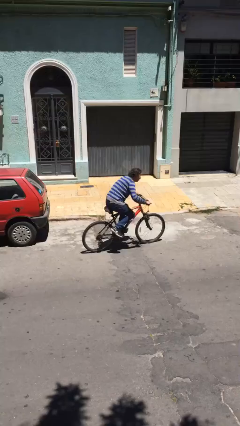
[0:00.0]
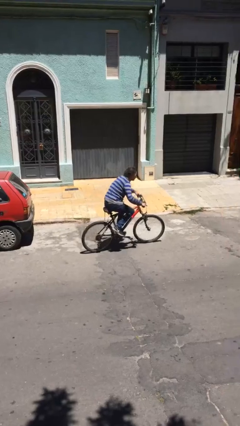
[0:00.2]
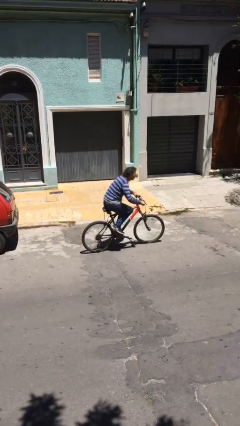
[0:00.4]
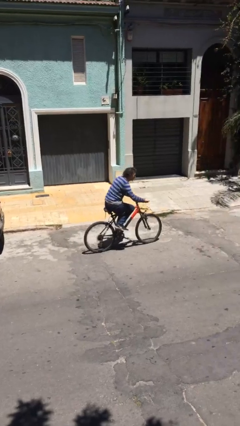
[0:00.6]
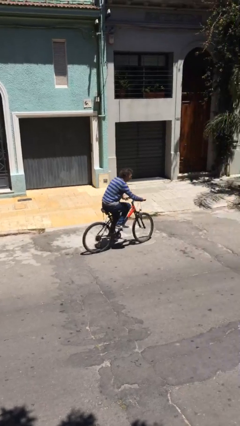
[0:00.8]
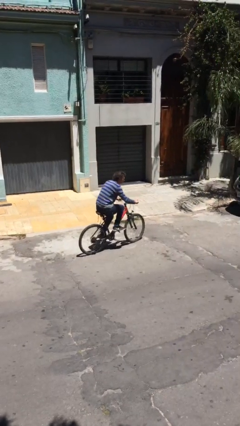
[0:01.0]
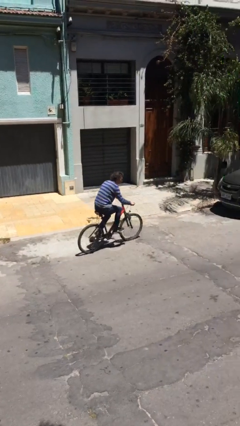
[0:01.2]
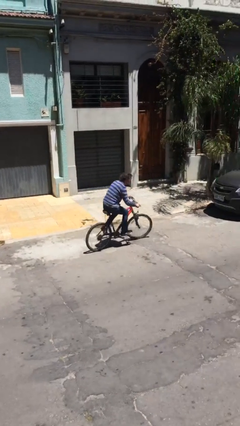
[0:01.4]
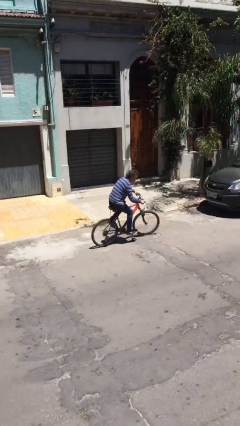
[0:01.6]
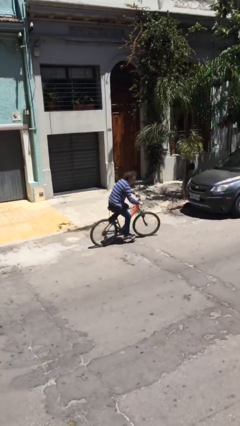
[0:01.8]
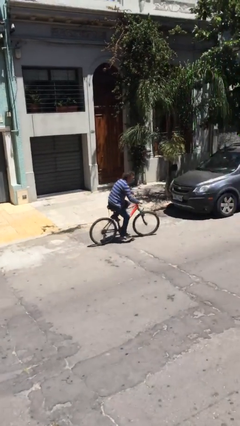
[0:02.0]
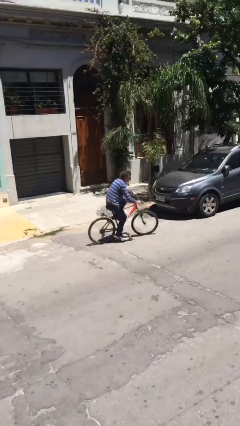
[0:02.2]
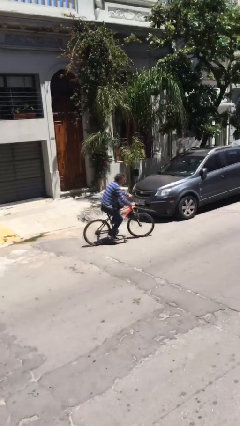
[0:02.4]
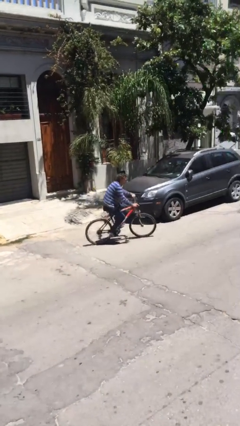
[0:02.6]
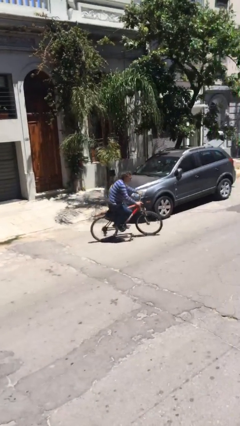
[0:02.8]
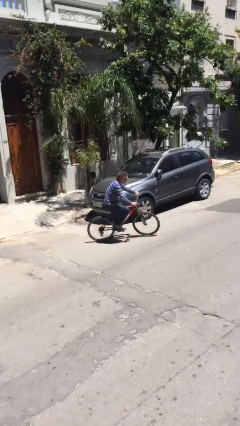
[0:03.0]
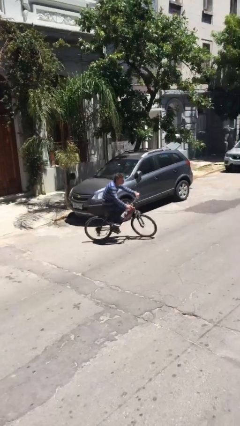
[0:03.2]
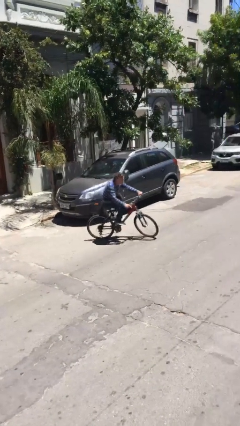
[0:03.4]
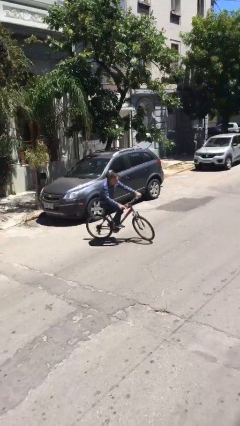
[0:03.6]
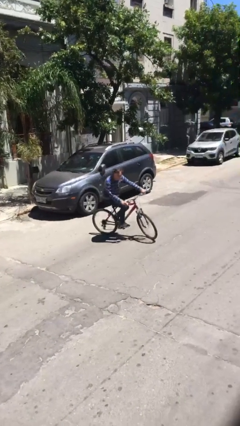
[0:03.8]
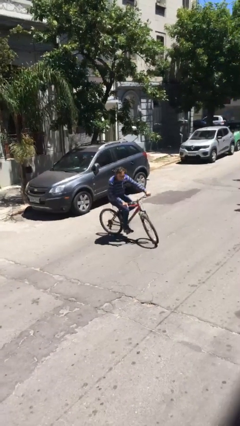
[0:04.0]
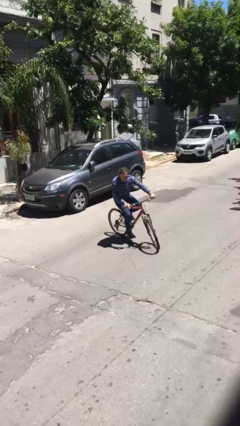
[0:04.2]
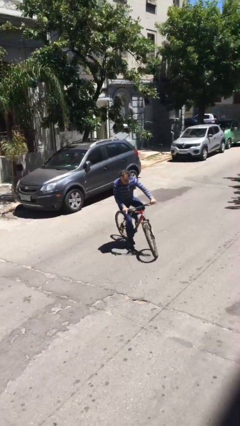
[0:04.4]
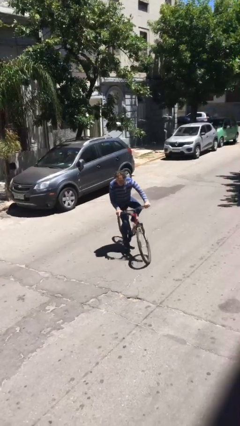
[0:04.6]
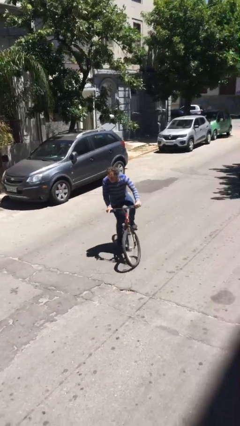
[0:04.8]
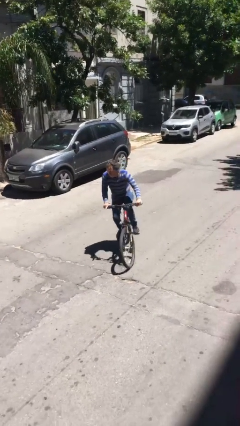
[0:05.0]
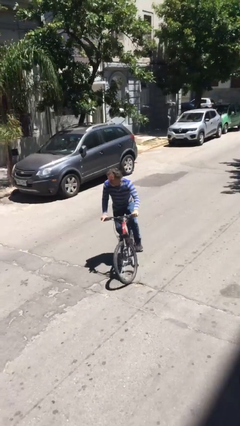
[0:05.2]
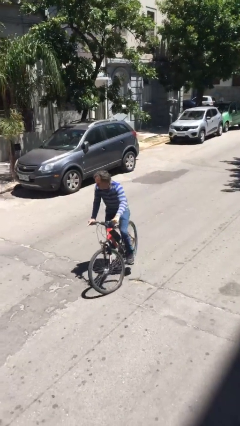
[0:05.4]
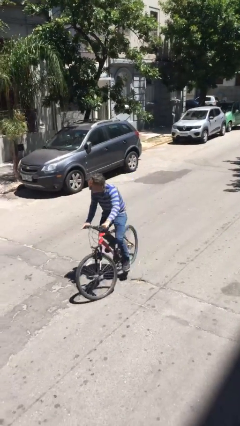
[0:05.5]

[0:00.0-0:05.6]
person rides bicycle

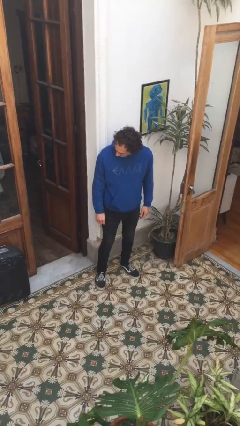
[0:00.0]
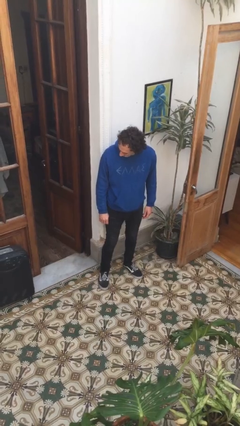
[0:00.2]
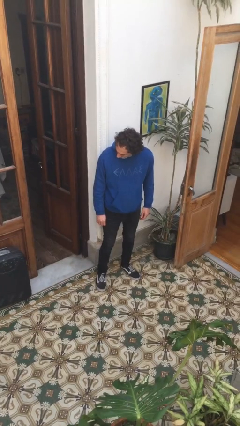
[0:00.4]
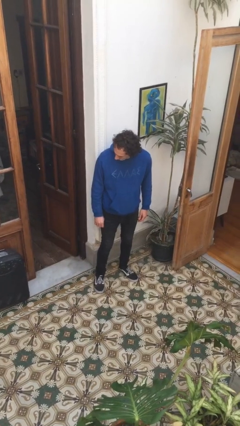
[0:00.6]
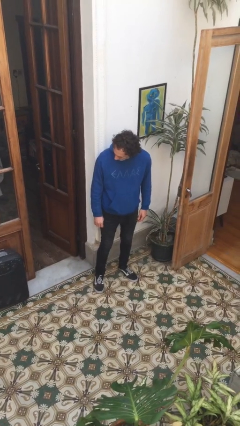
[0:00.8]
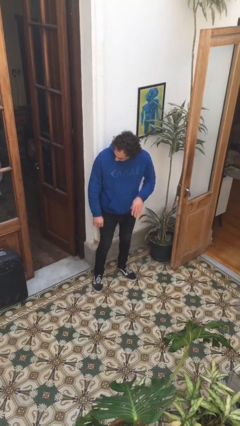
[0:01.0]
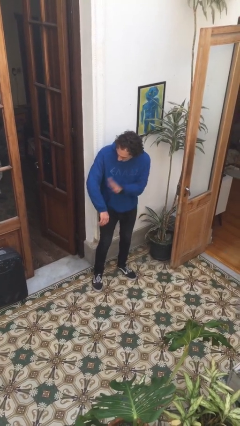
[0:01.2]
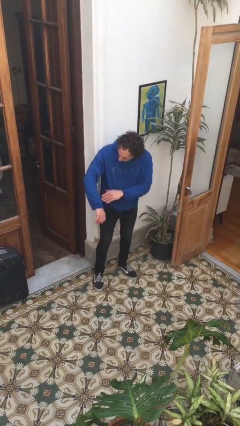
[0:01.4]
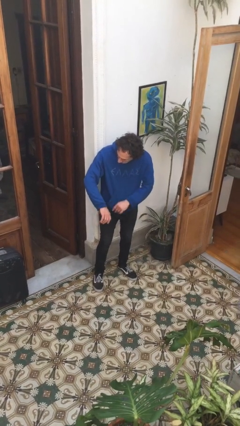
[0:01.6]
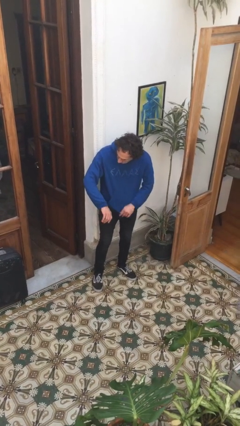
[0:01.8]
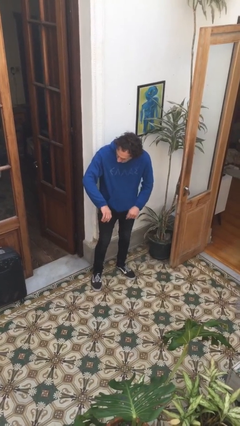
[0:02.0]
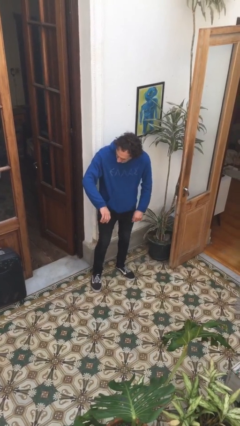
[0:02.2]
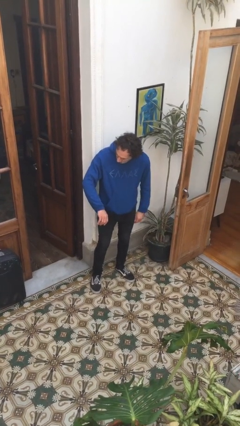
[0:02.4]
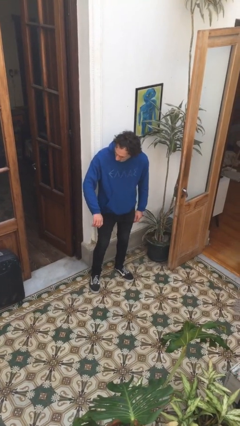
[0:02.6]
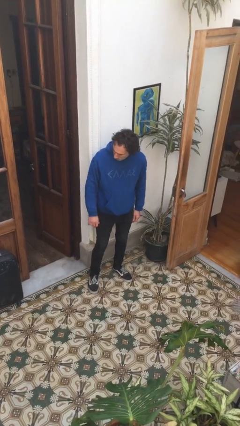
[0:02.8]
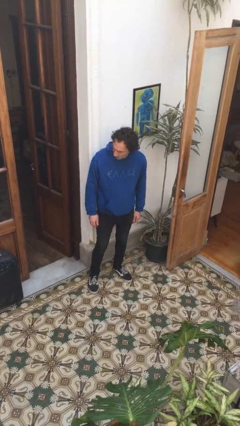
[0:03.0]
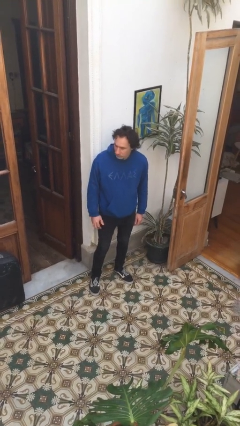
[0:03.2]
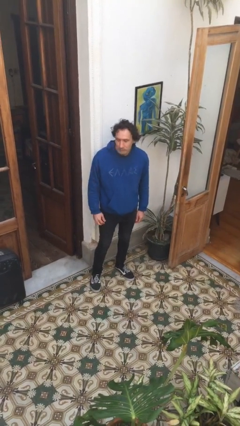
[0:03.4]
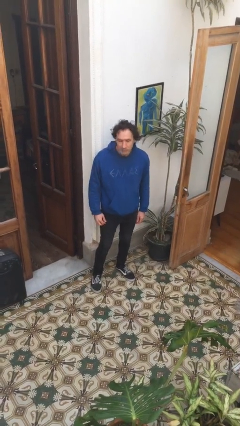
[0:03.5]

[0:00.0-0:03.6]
person swats bug

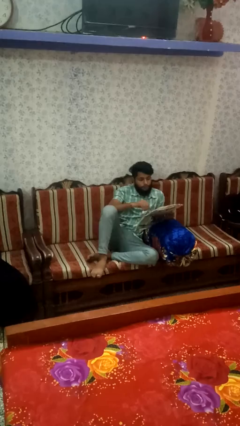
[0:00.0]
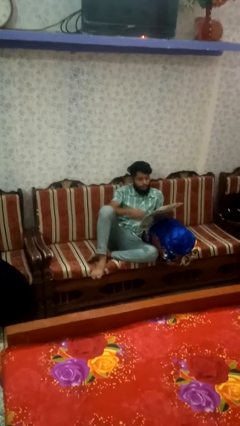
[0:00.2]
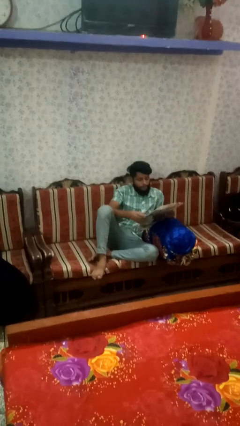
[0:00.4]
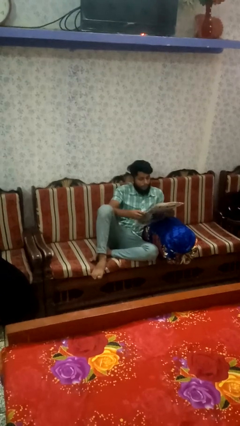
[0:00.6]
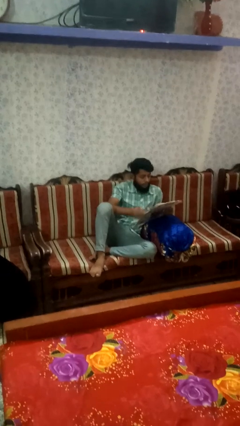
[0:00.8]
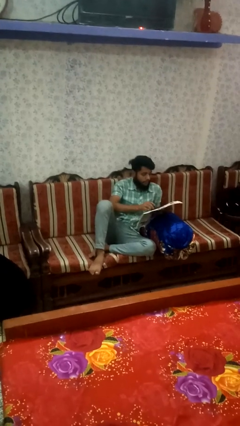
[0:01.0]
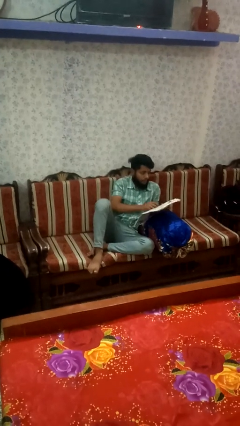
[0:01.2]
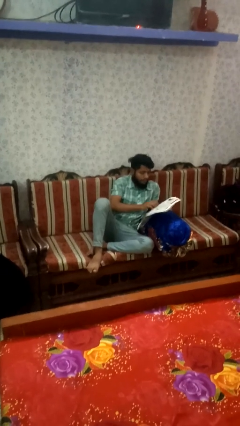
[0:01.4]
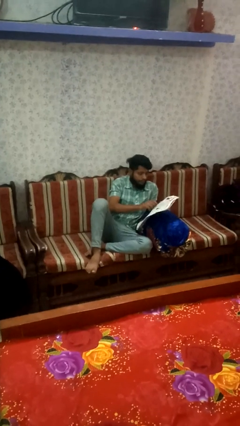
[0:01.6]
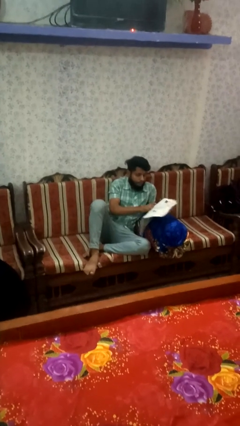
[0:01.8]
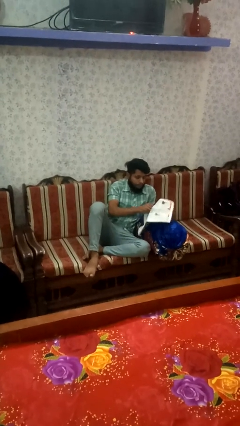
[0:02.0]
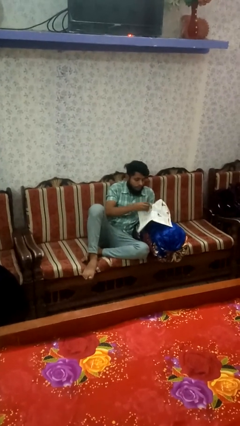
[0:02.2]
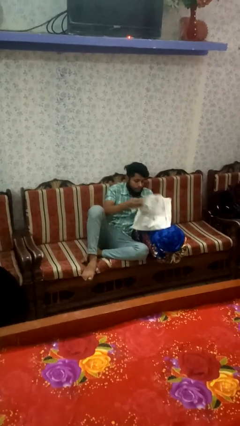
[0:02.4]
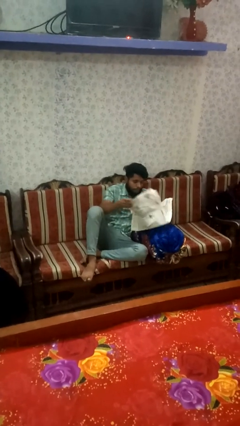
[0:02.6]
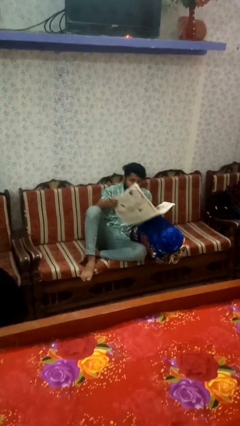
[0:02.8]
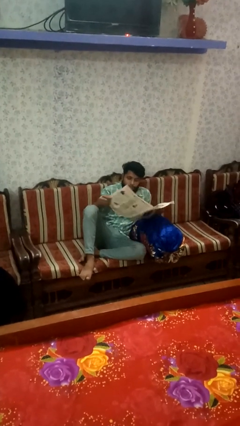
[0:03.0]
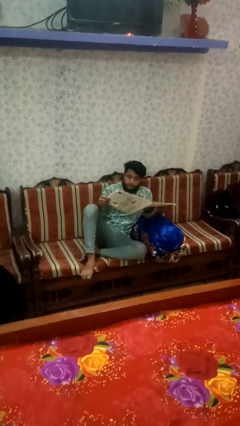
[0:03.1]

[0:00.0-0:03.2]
person reads newspaper

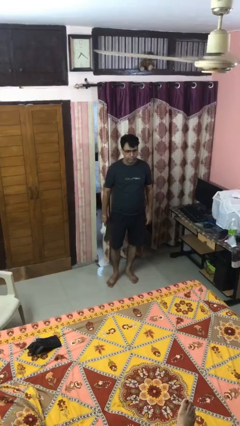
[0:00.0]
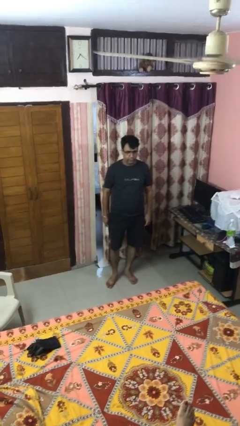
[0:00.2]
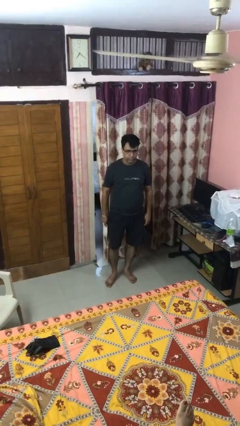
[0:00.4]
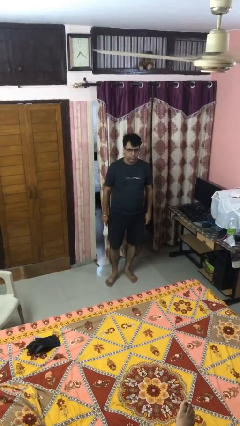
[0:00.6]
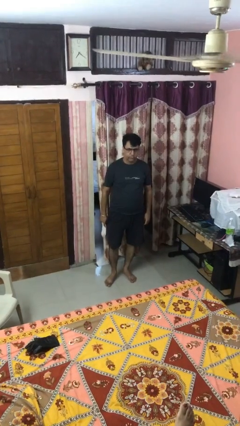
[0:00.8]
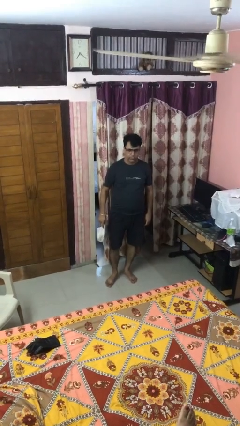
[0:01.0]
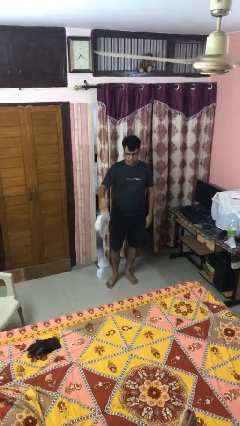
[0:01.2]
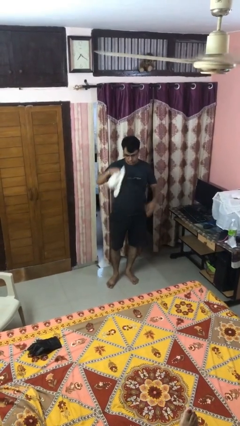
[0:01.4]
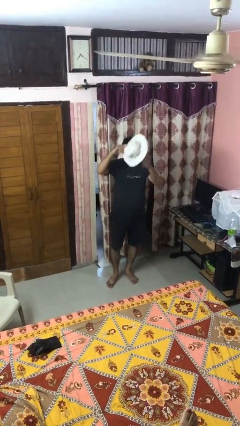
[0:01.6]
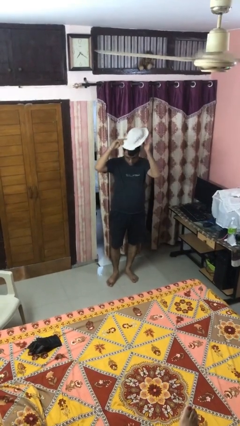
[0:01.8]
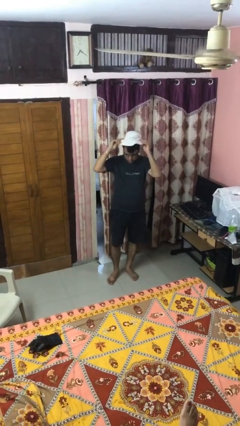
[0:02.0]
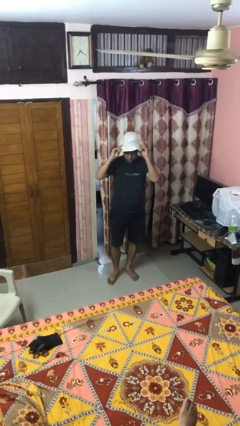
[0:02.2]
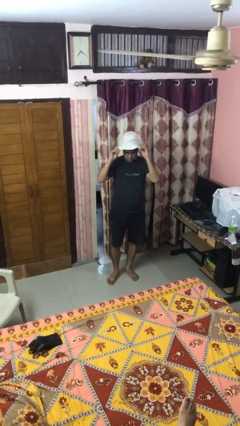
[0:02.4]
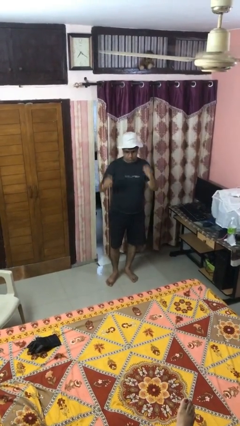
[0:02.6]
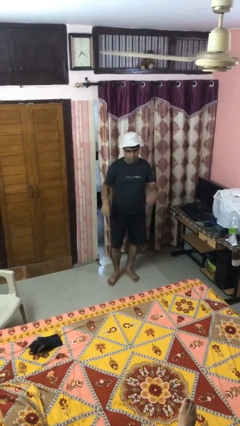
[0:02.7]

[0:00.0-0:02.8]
person puts on hat

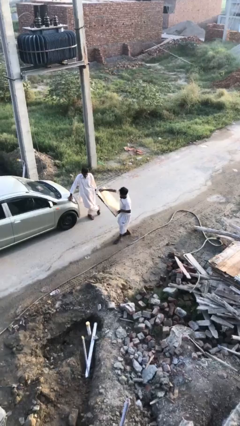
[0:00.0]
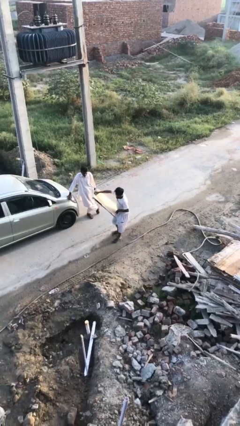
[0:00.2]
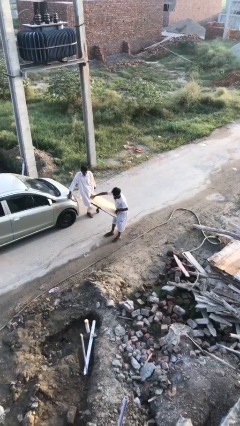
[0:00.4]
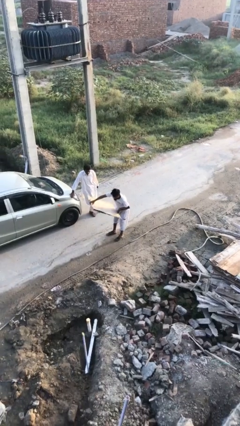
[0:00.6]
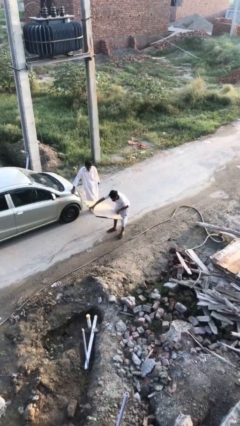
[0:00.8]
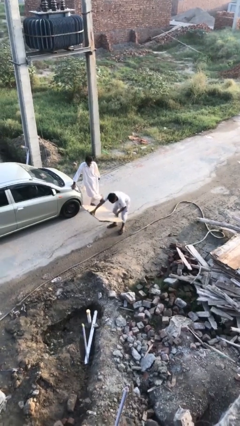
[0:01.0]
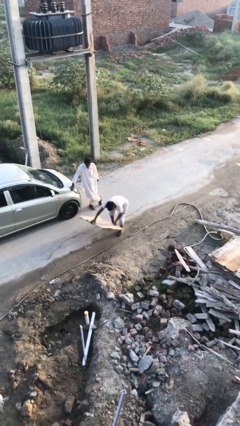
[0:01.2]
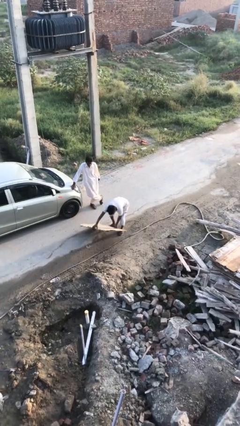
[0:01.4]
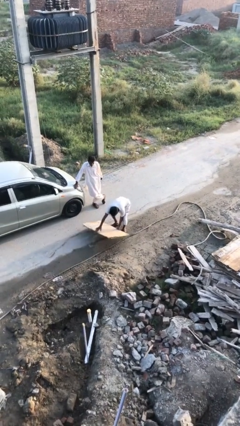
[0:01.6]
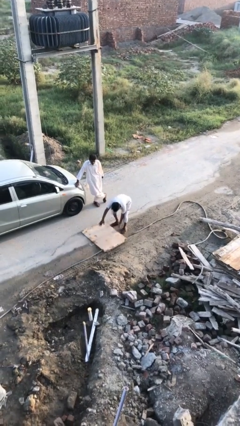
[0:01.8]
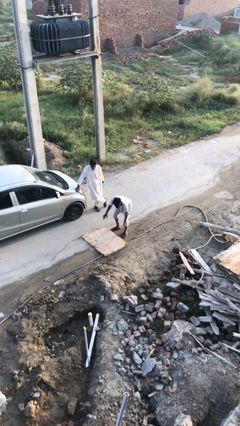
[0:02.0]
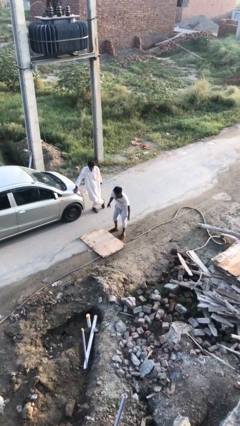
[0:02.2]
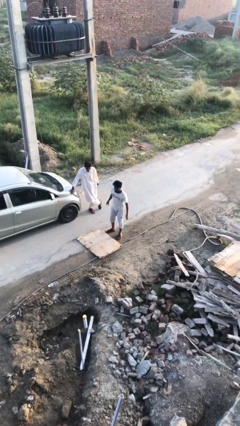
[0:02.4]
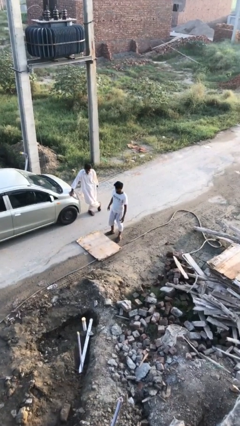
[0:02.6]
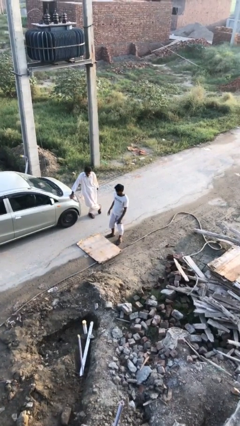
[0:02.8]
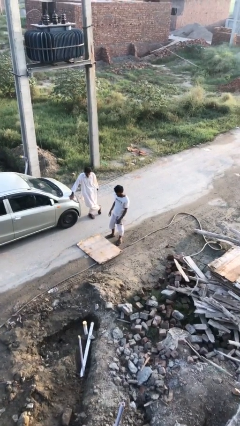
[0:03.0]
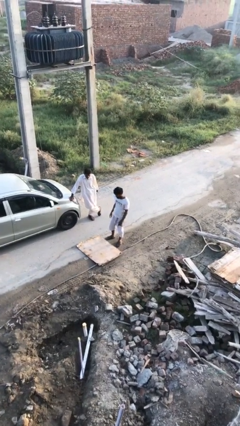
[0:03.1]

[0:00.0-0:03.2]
person puts down object on floor
